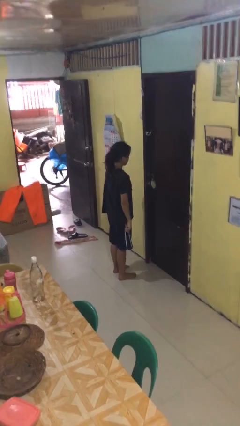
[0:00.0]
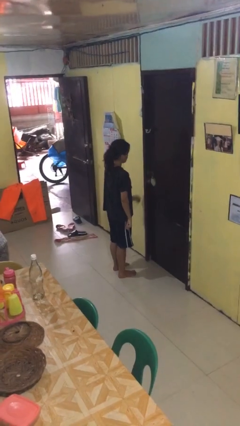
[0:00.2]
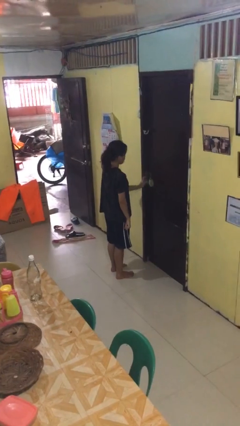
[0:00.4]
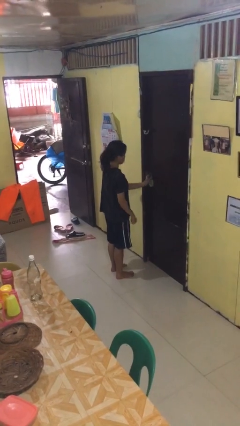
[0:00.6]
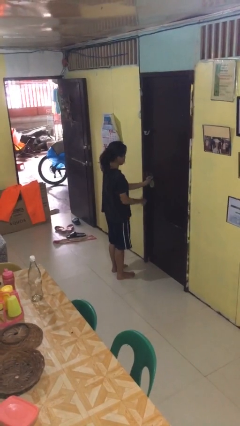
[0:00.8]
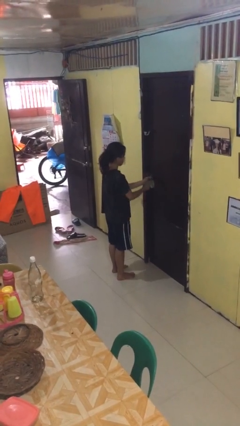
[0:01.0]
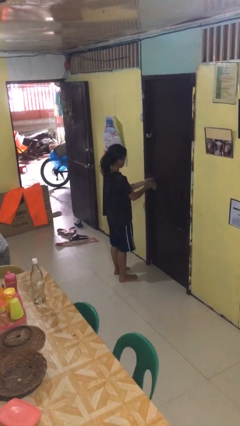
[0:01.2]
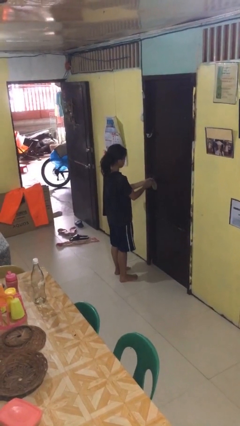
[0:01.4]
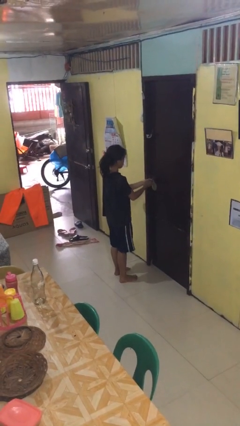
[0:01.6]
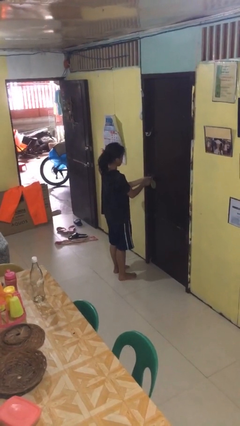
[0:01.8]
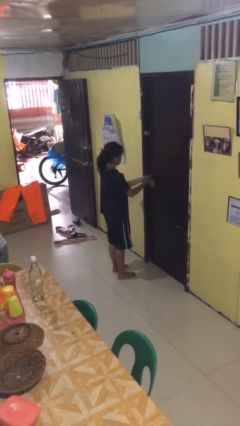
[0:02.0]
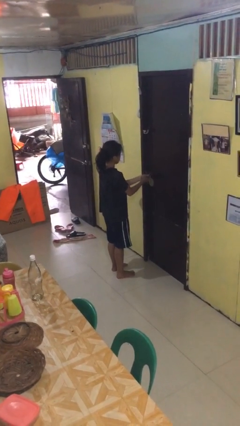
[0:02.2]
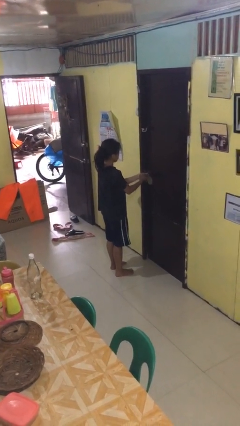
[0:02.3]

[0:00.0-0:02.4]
person unlocks door with keys

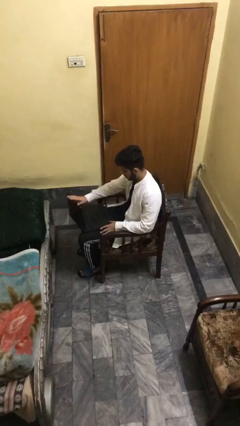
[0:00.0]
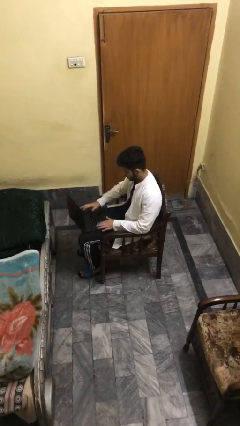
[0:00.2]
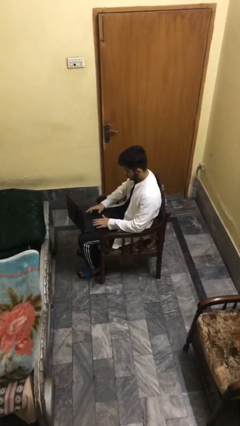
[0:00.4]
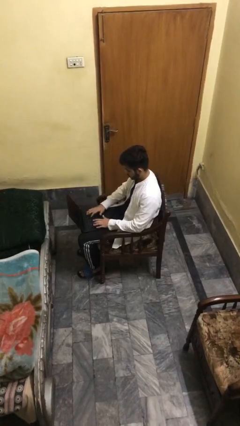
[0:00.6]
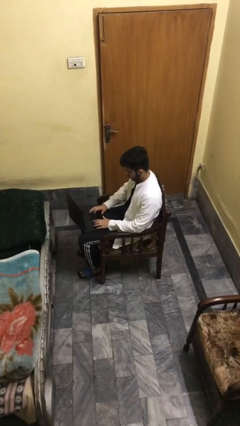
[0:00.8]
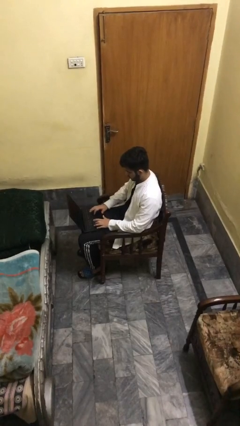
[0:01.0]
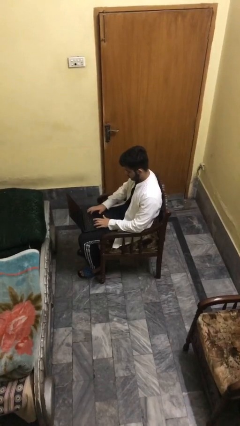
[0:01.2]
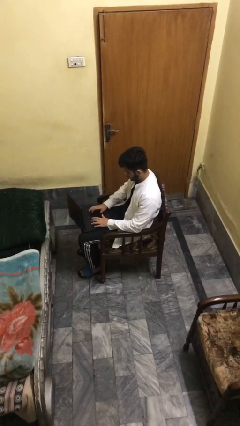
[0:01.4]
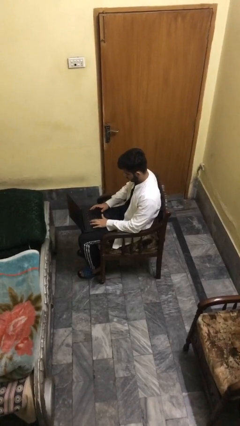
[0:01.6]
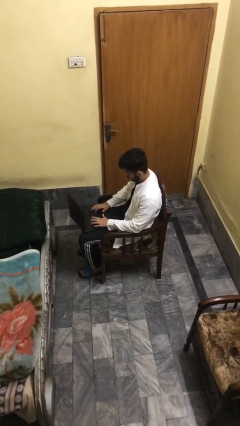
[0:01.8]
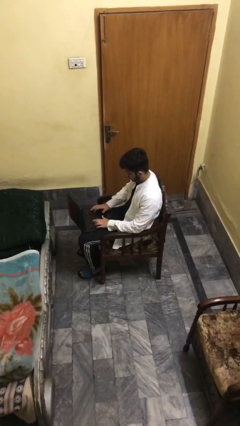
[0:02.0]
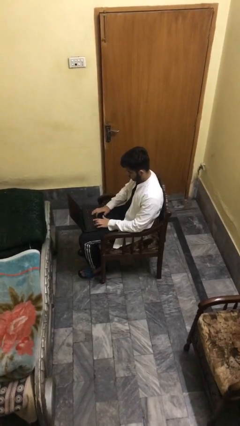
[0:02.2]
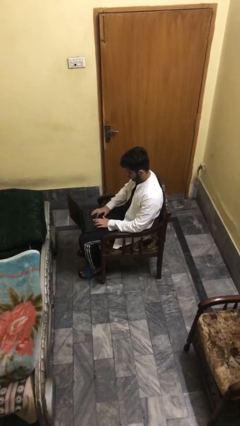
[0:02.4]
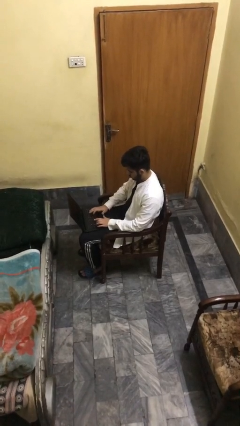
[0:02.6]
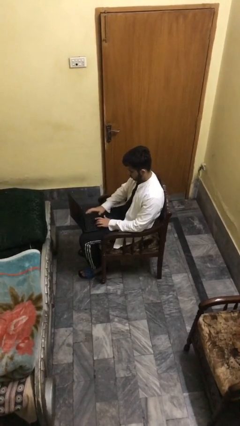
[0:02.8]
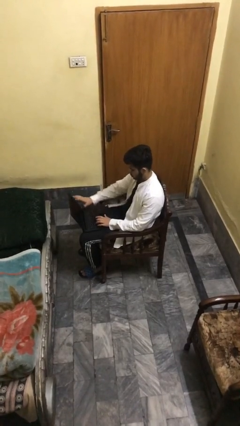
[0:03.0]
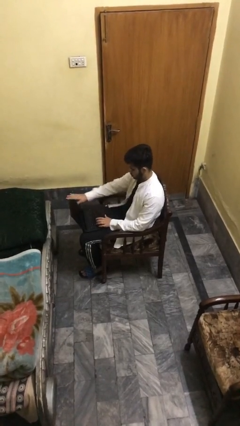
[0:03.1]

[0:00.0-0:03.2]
person interacts with laptop

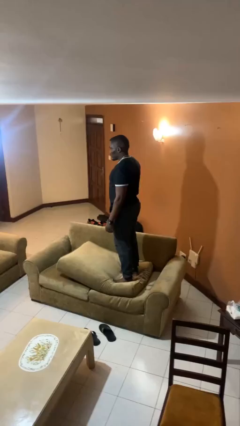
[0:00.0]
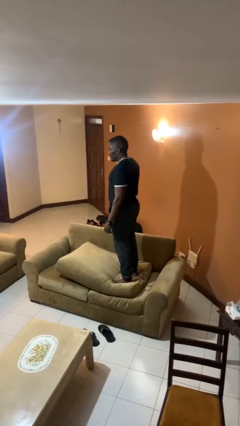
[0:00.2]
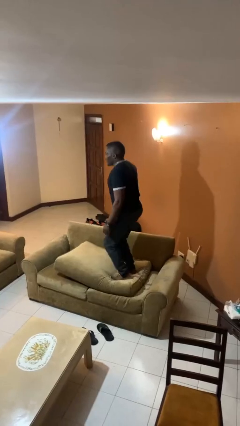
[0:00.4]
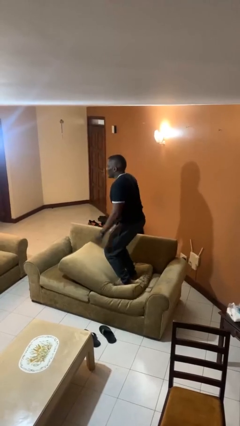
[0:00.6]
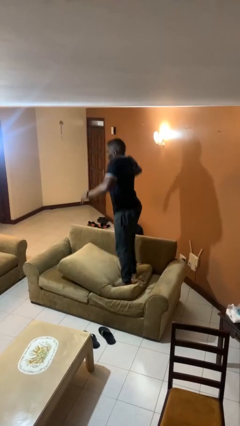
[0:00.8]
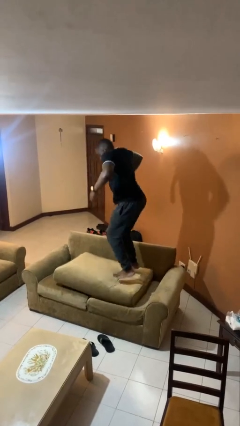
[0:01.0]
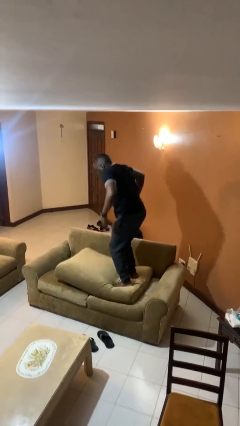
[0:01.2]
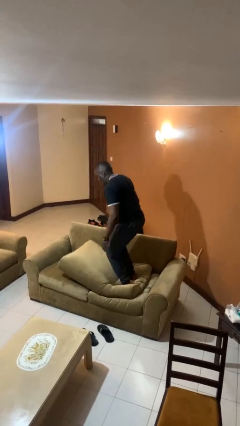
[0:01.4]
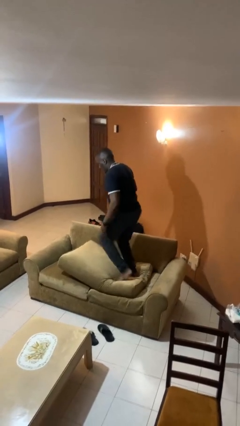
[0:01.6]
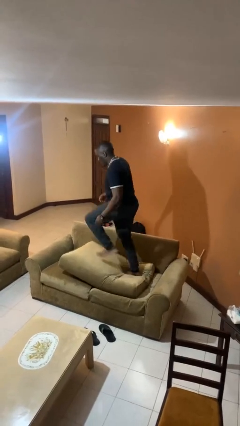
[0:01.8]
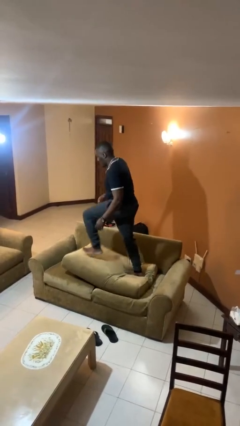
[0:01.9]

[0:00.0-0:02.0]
person jumps on couch

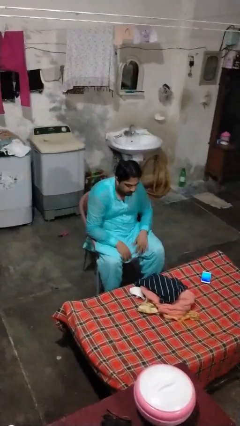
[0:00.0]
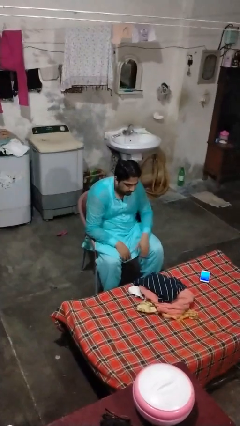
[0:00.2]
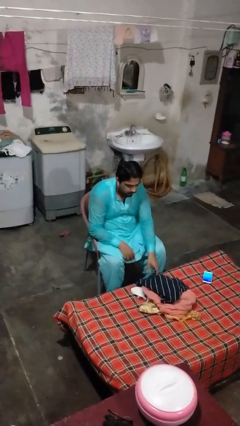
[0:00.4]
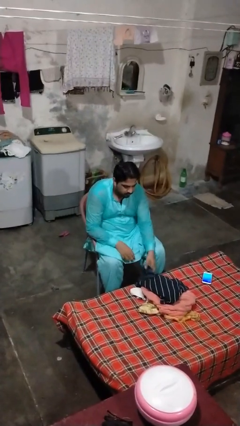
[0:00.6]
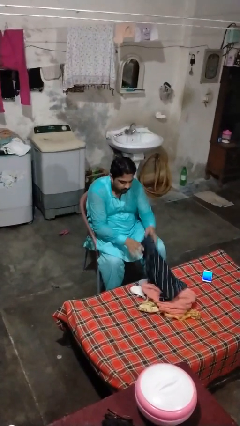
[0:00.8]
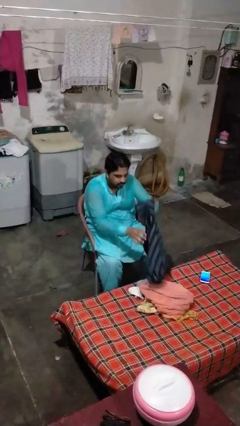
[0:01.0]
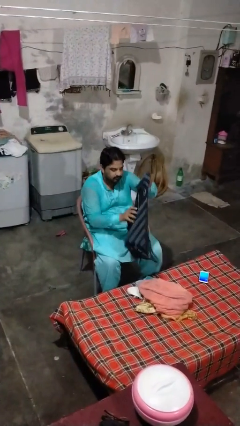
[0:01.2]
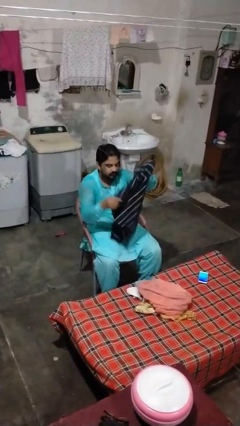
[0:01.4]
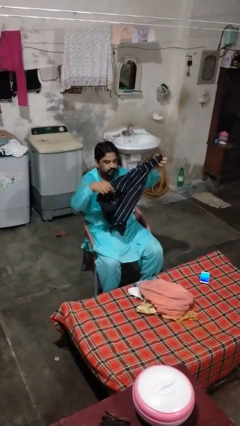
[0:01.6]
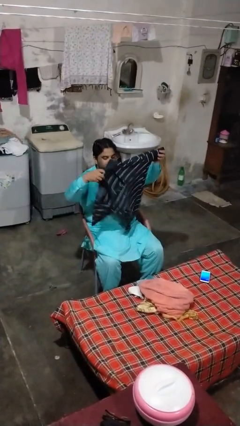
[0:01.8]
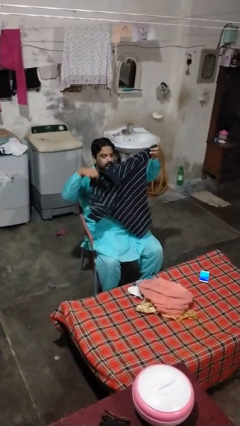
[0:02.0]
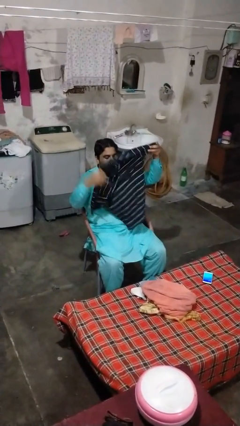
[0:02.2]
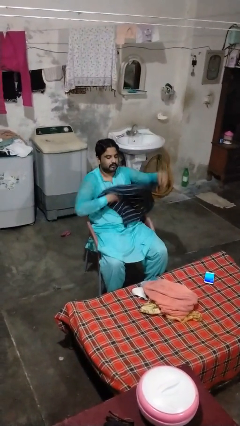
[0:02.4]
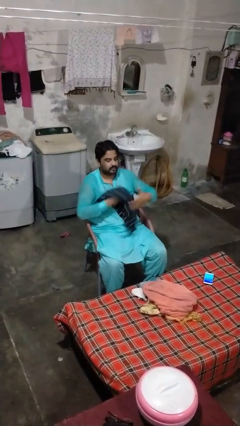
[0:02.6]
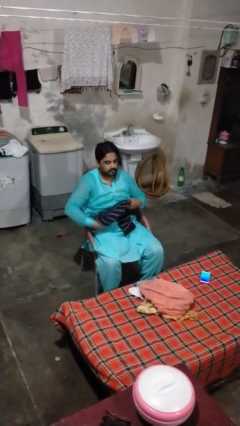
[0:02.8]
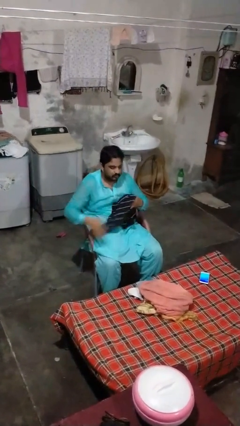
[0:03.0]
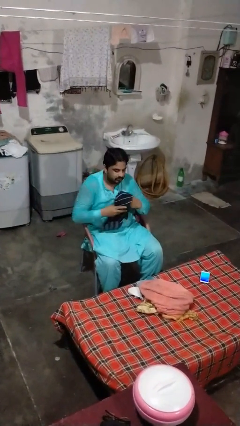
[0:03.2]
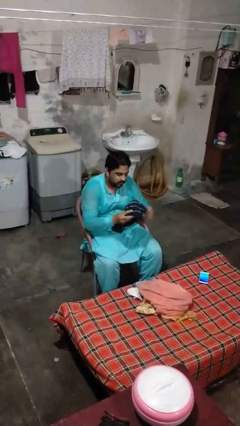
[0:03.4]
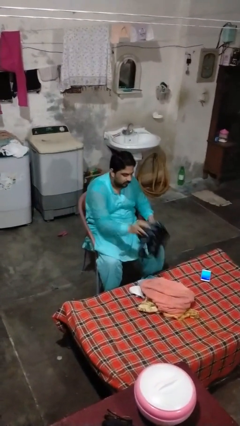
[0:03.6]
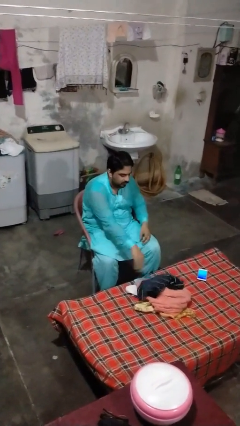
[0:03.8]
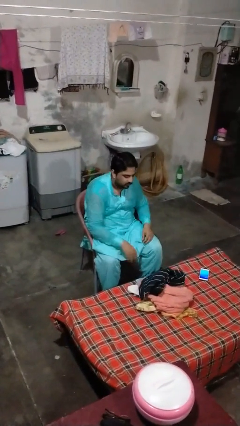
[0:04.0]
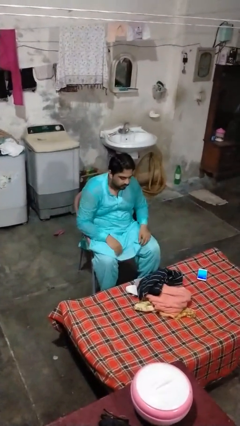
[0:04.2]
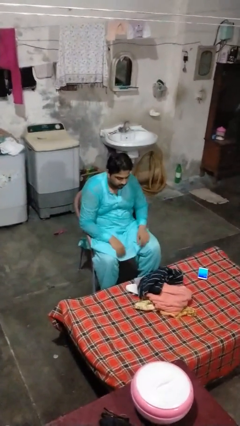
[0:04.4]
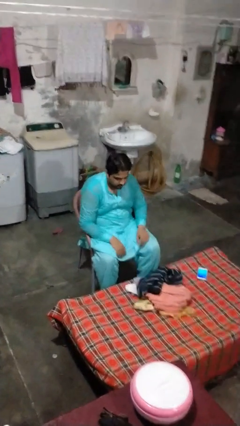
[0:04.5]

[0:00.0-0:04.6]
person folds shirt

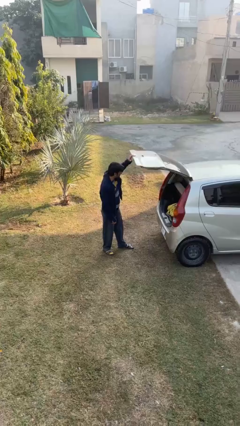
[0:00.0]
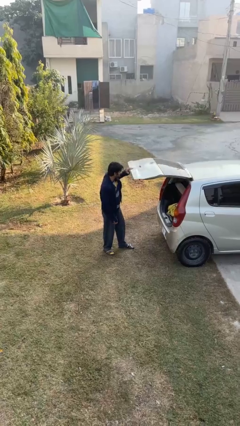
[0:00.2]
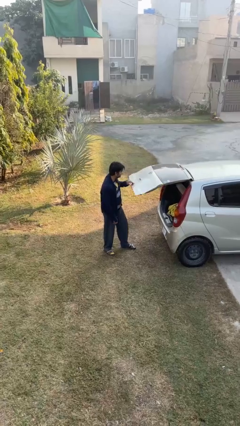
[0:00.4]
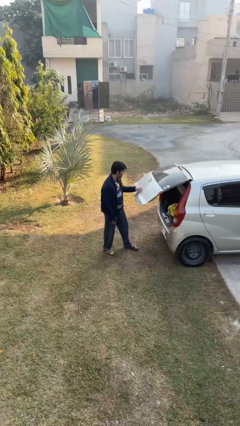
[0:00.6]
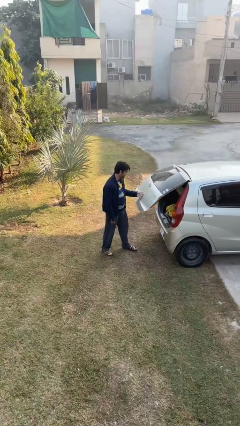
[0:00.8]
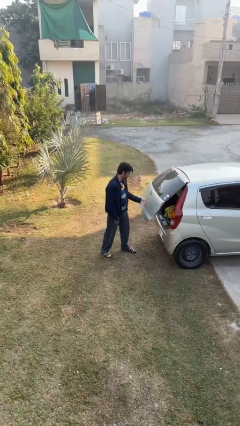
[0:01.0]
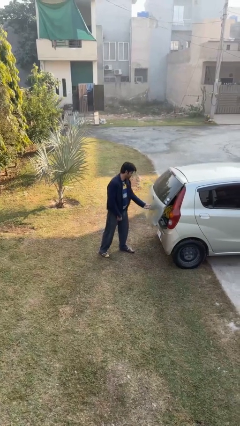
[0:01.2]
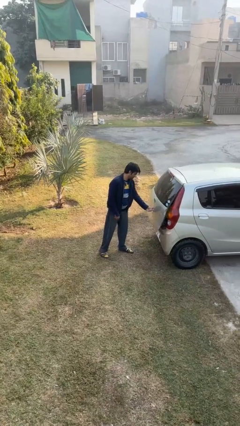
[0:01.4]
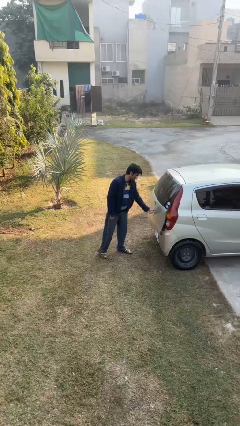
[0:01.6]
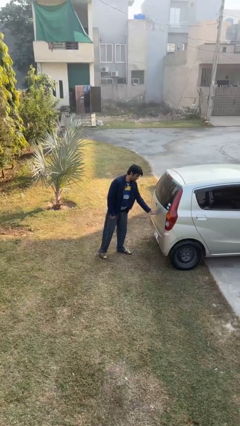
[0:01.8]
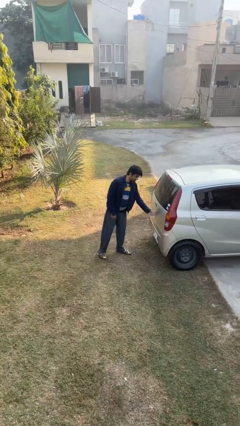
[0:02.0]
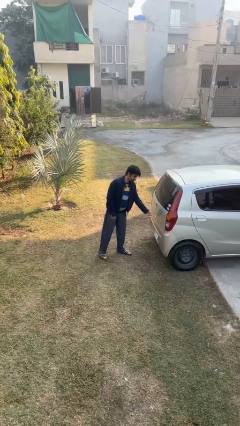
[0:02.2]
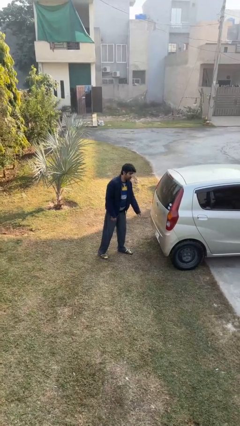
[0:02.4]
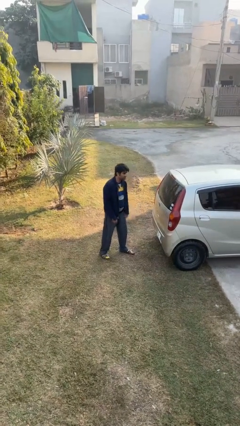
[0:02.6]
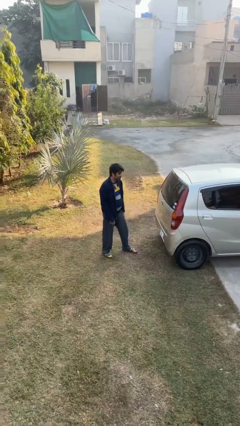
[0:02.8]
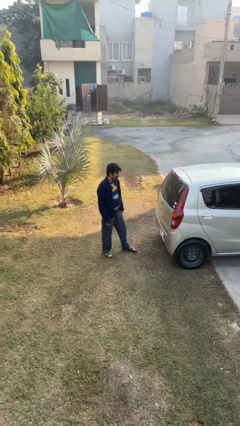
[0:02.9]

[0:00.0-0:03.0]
person closes car trunk

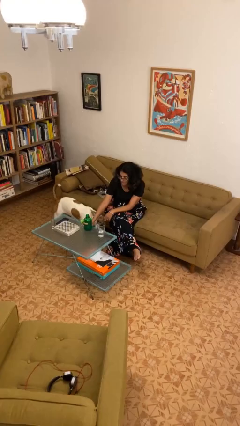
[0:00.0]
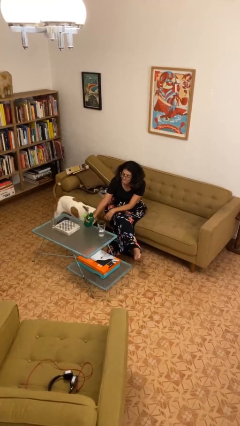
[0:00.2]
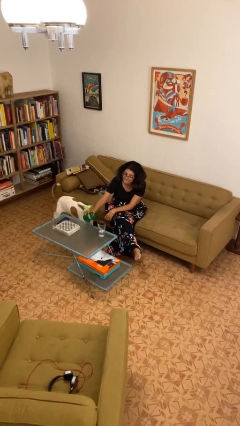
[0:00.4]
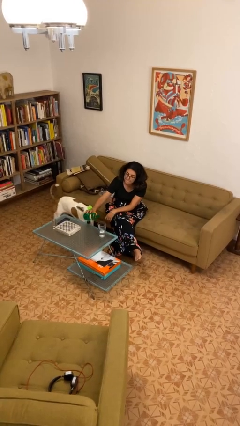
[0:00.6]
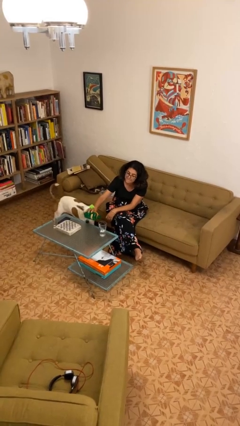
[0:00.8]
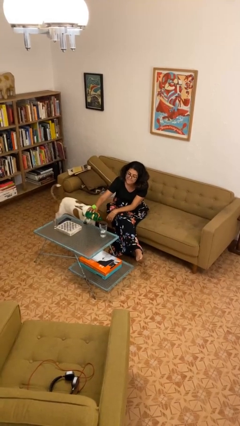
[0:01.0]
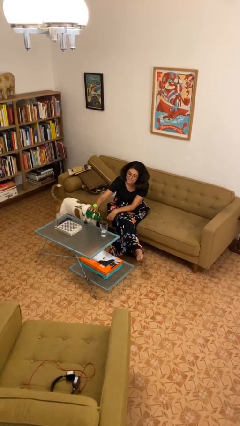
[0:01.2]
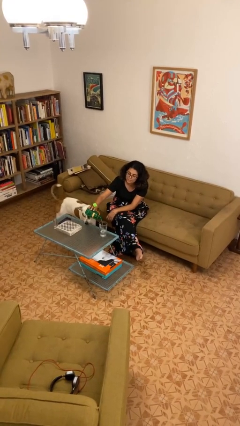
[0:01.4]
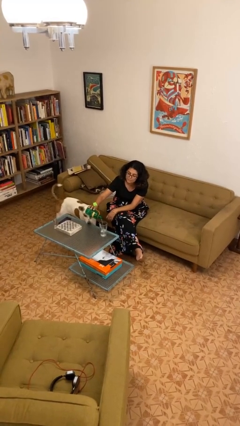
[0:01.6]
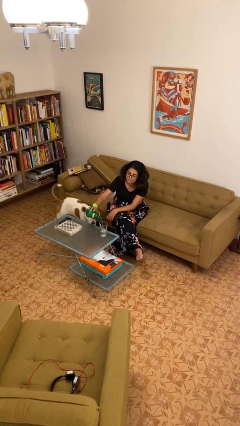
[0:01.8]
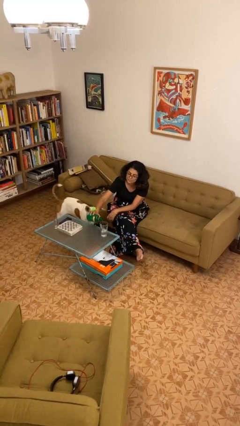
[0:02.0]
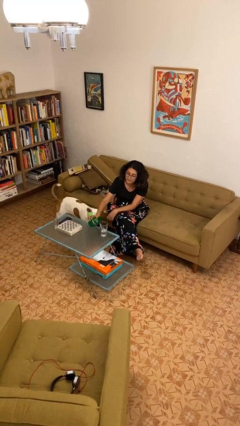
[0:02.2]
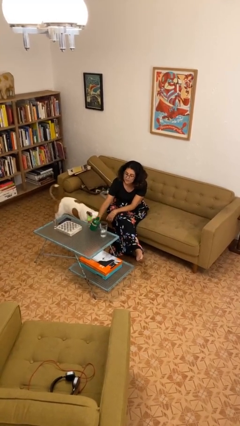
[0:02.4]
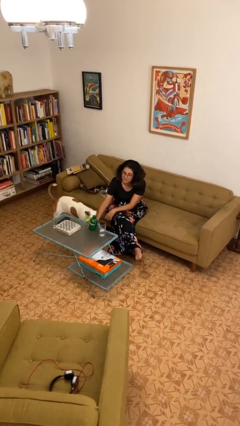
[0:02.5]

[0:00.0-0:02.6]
person pours liquid into cup
